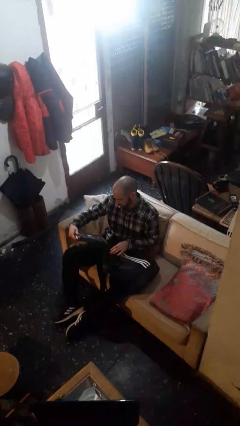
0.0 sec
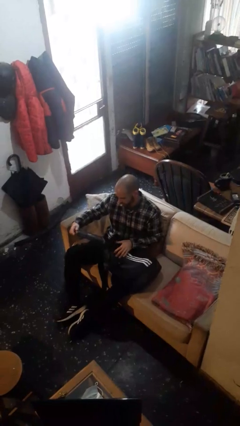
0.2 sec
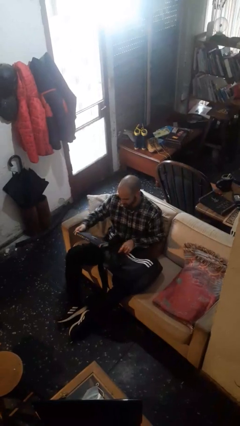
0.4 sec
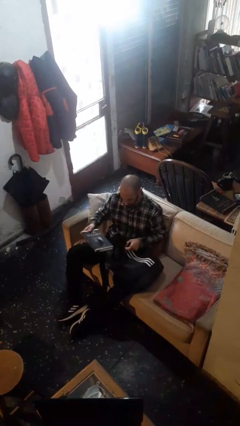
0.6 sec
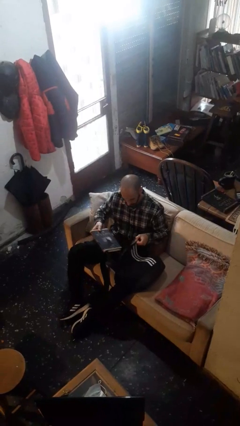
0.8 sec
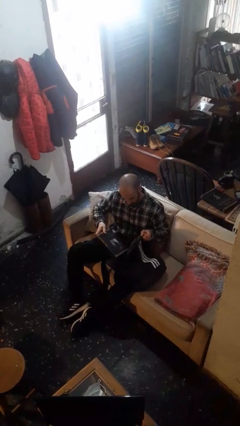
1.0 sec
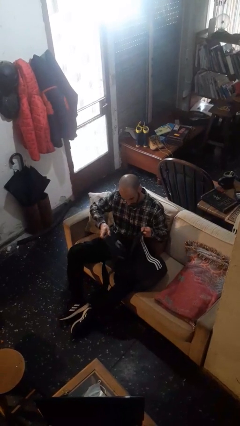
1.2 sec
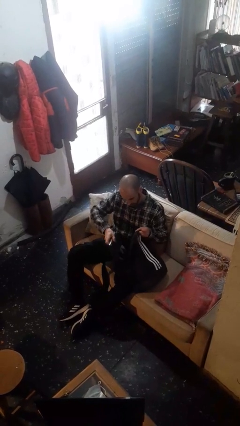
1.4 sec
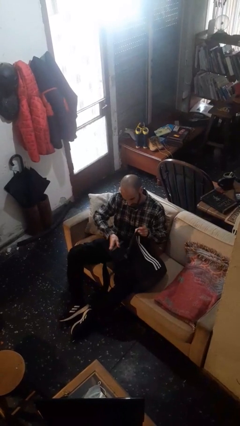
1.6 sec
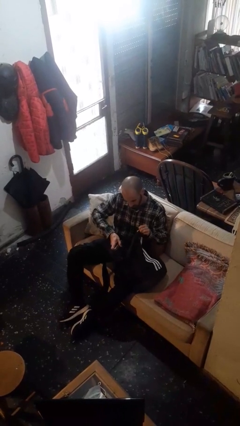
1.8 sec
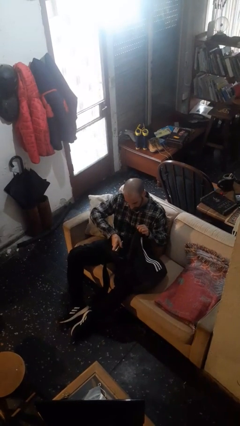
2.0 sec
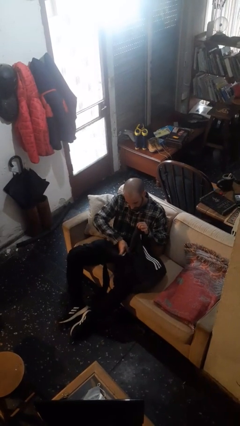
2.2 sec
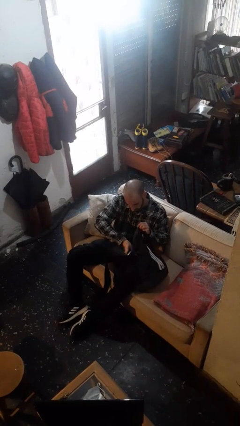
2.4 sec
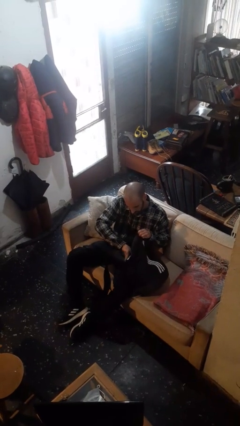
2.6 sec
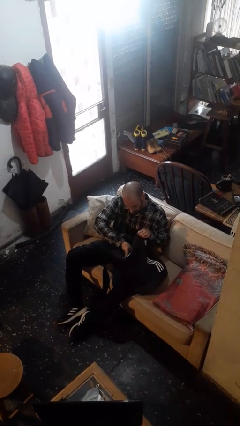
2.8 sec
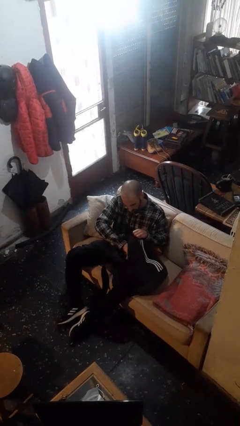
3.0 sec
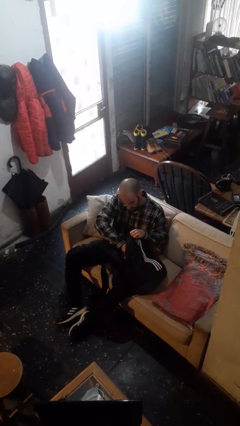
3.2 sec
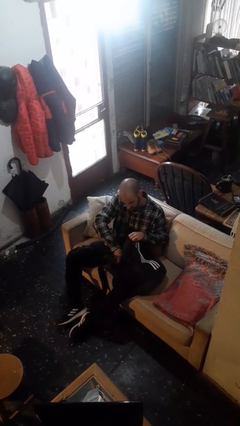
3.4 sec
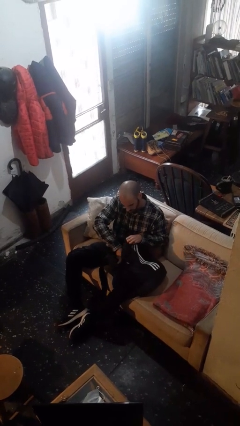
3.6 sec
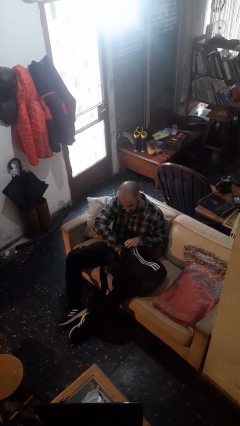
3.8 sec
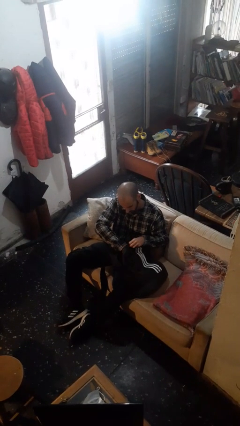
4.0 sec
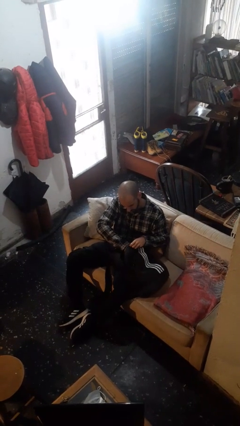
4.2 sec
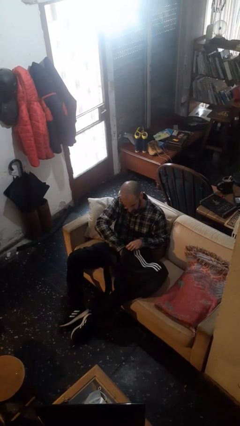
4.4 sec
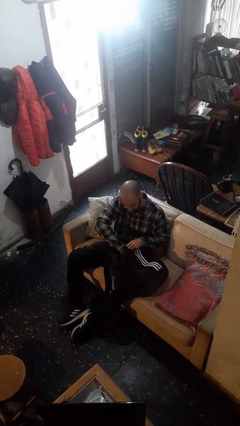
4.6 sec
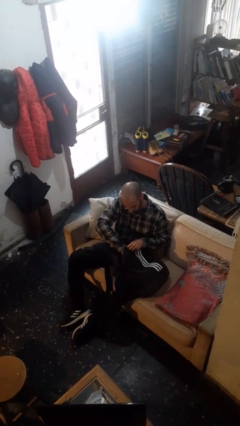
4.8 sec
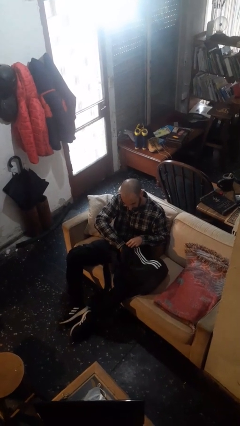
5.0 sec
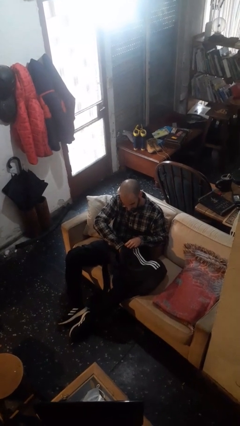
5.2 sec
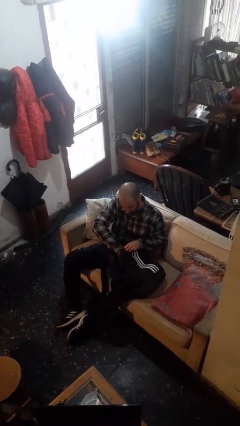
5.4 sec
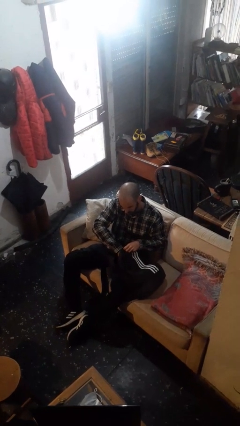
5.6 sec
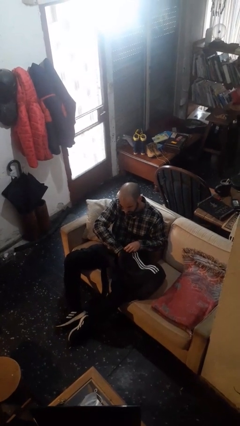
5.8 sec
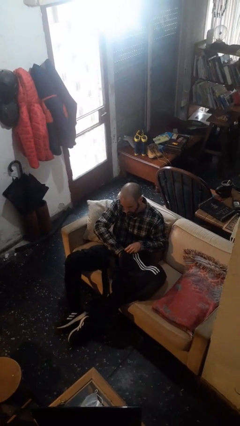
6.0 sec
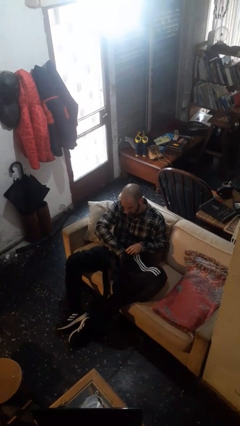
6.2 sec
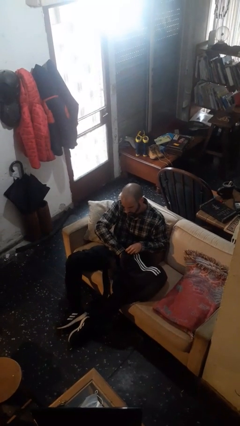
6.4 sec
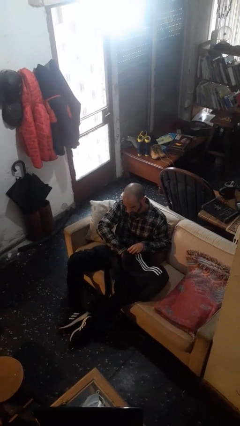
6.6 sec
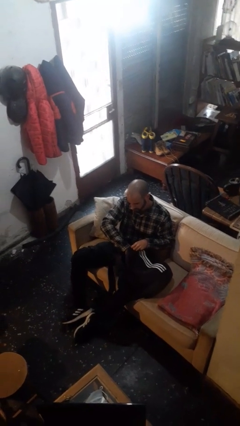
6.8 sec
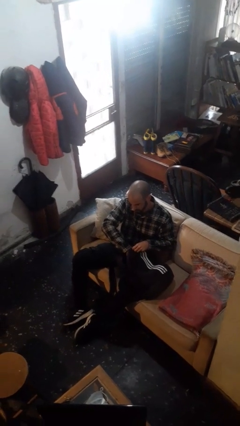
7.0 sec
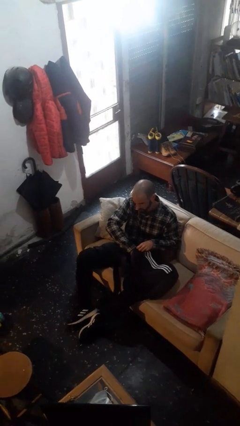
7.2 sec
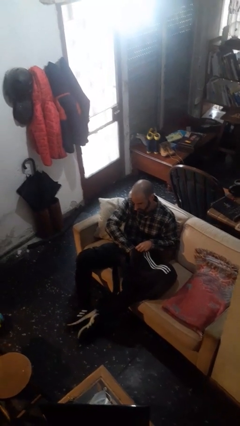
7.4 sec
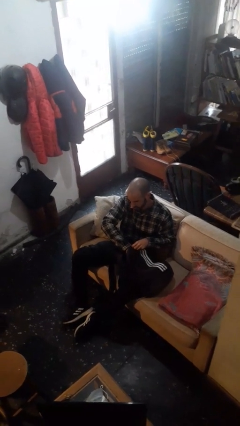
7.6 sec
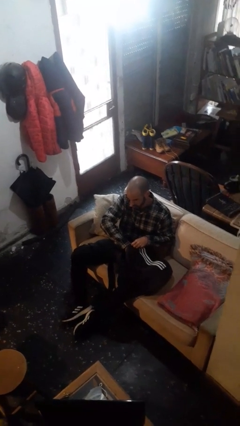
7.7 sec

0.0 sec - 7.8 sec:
person puts object into backpack

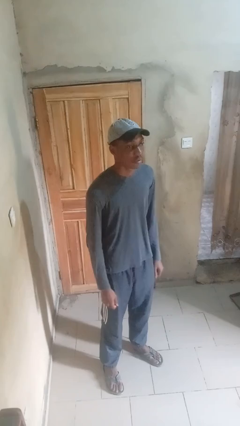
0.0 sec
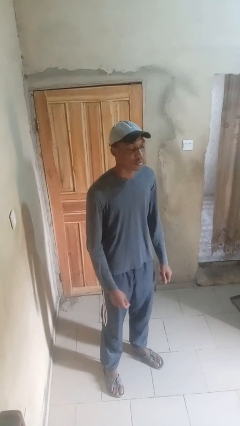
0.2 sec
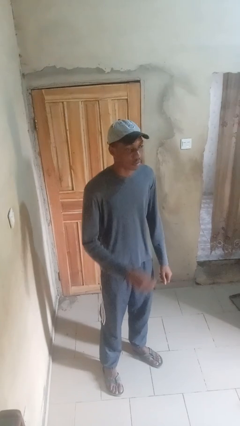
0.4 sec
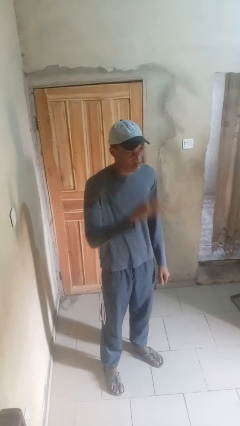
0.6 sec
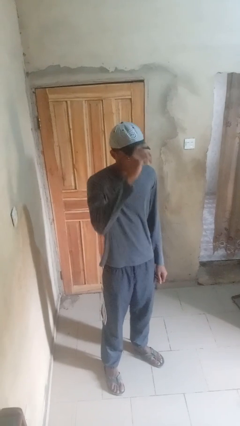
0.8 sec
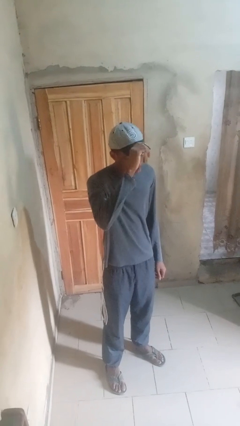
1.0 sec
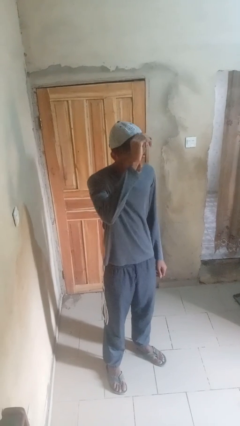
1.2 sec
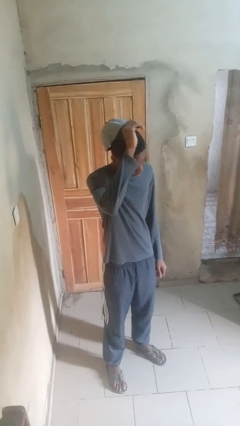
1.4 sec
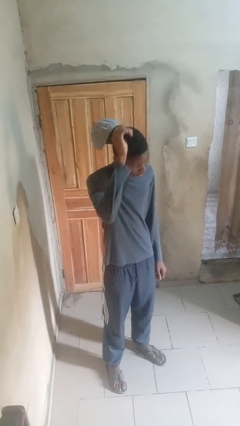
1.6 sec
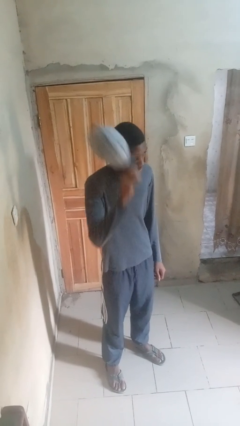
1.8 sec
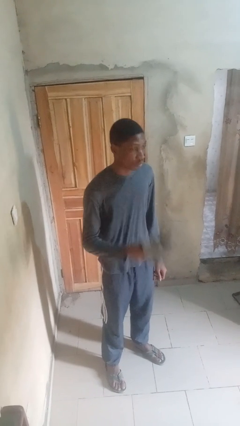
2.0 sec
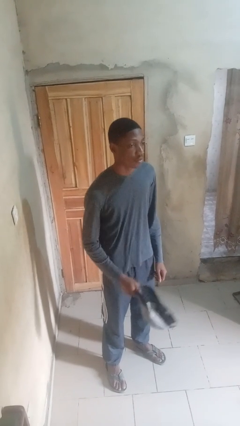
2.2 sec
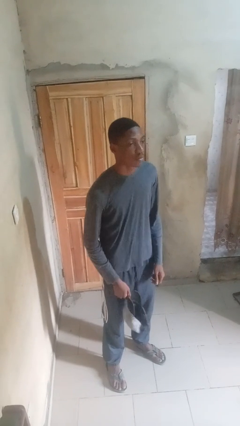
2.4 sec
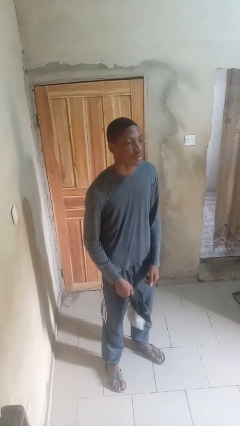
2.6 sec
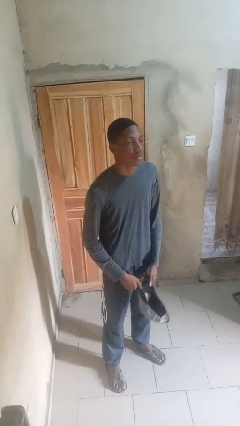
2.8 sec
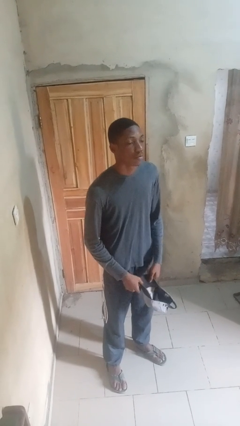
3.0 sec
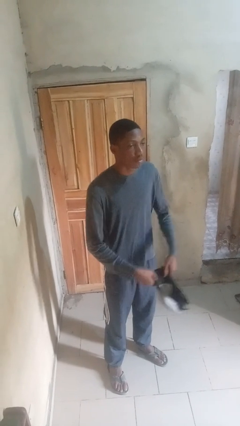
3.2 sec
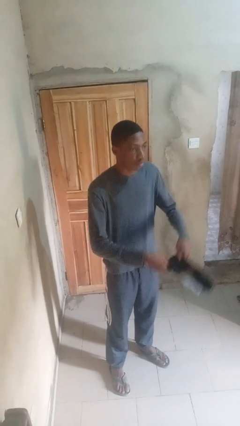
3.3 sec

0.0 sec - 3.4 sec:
person takes off hat

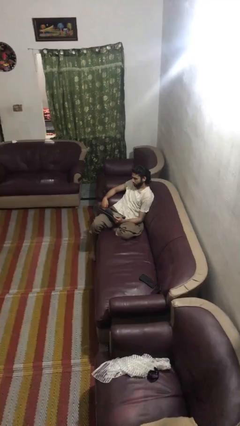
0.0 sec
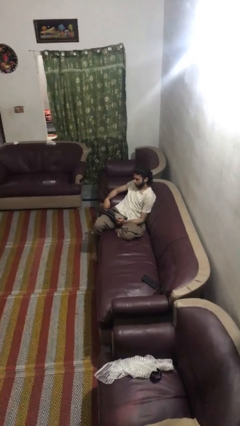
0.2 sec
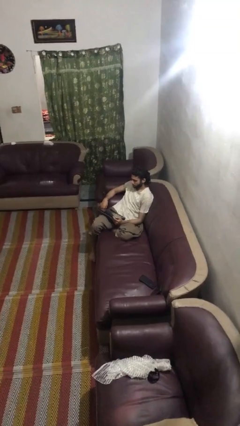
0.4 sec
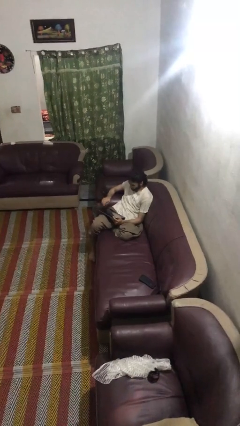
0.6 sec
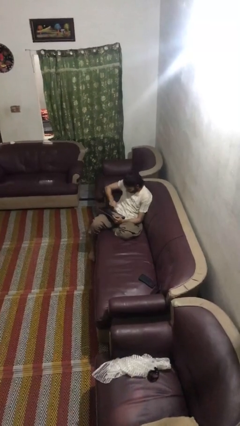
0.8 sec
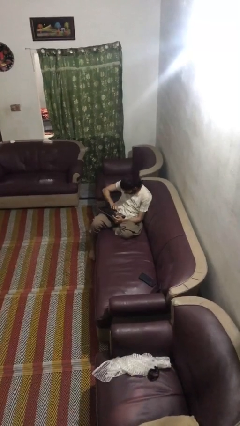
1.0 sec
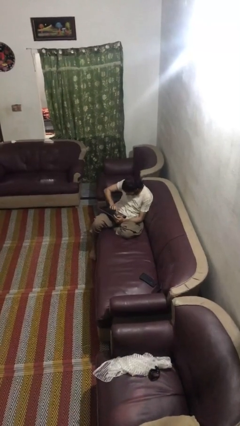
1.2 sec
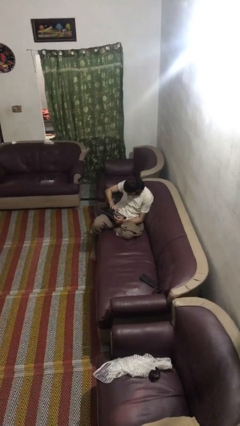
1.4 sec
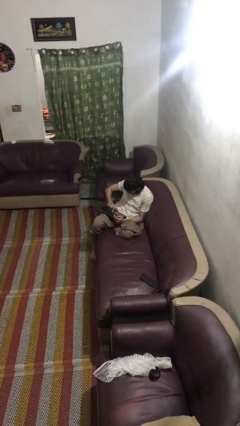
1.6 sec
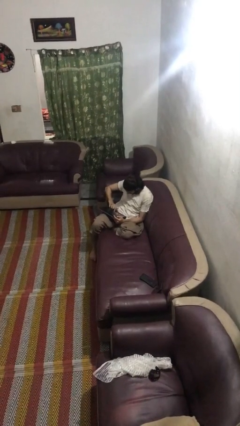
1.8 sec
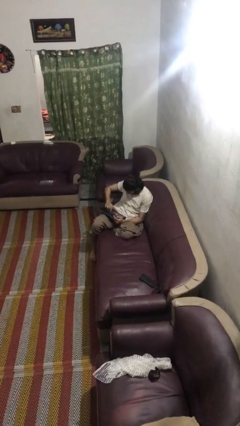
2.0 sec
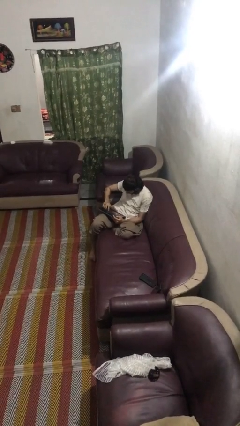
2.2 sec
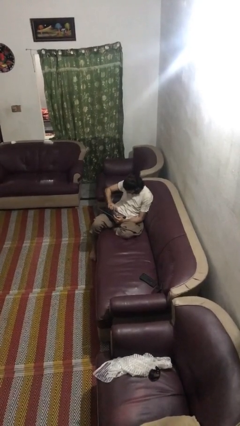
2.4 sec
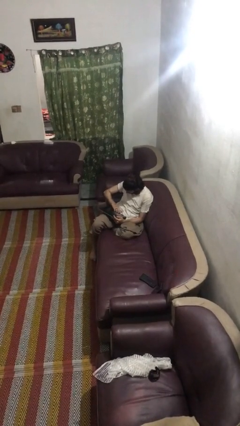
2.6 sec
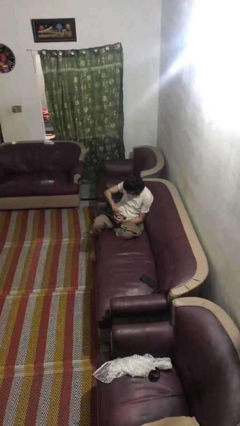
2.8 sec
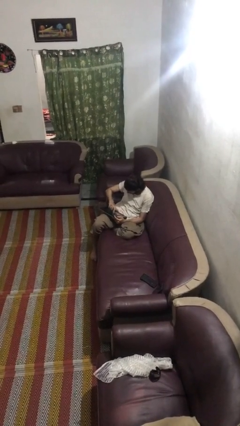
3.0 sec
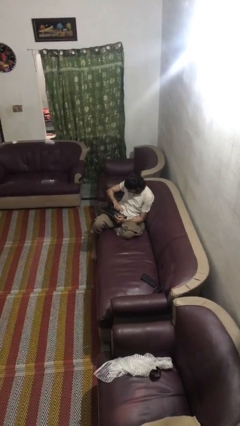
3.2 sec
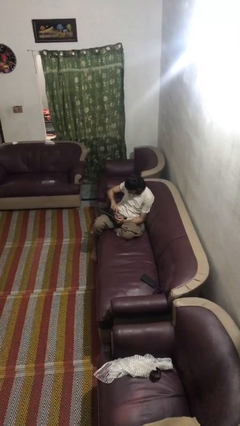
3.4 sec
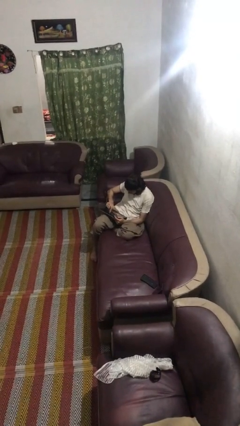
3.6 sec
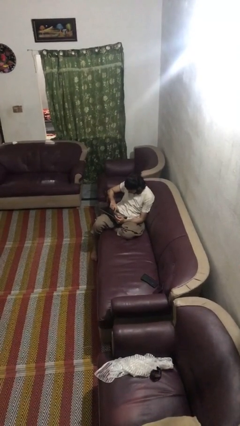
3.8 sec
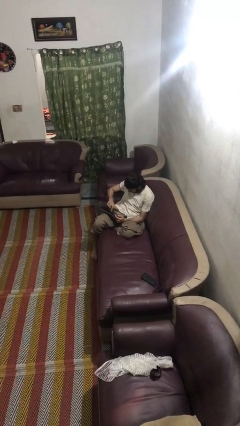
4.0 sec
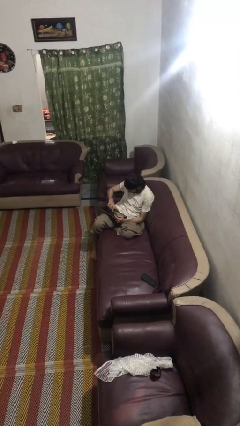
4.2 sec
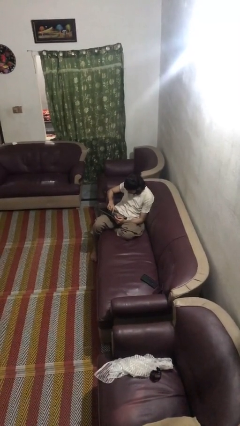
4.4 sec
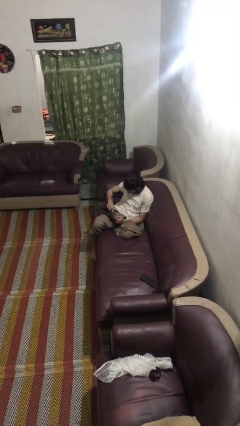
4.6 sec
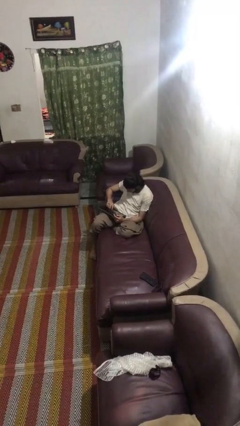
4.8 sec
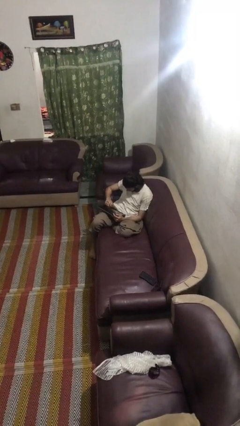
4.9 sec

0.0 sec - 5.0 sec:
person interacts with tablet

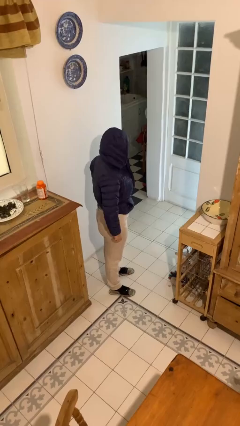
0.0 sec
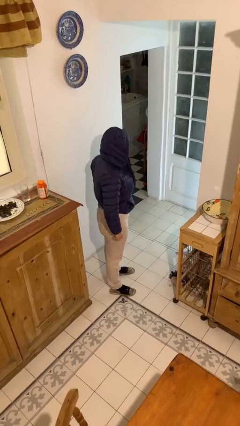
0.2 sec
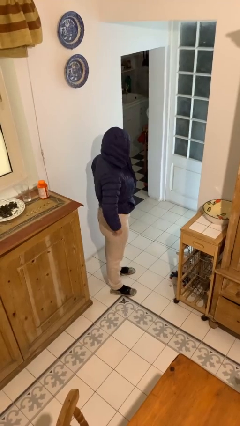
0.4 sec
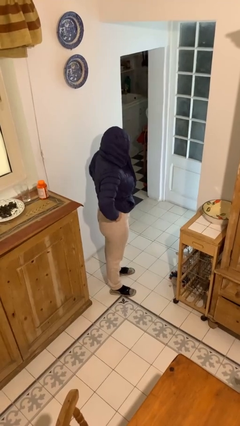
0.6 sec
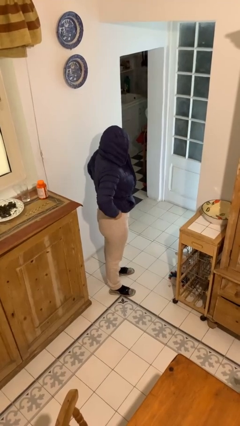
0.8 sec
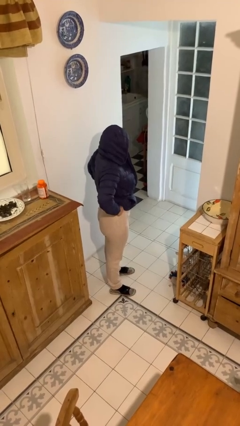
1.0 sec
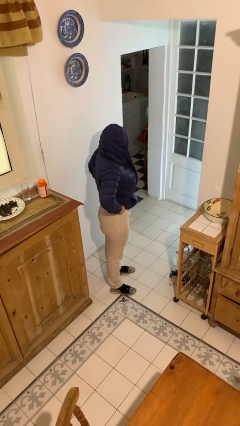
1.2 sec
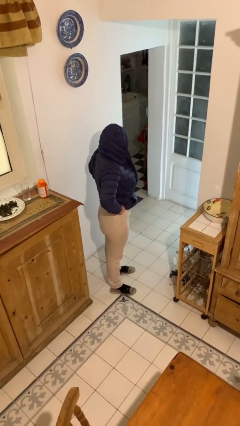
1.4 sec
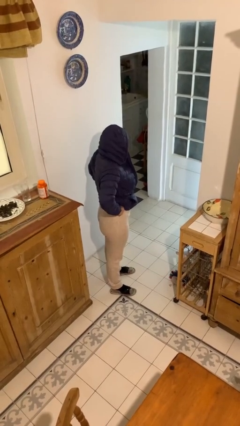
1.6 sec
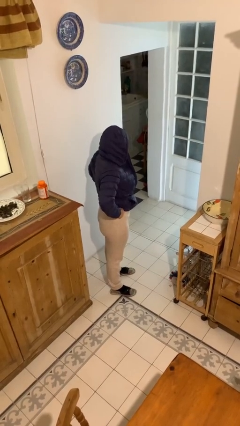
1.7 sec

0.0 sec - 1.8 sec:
person hikes up pants
